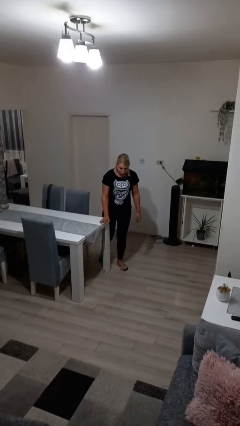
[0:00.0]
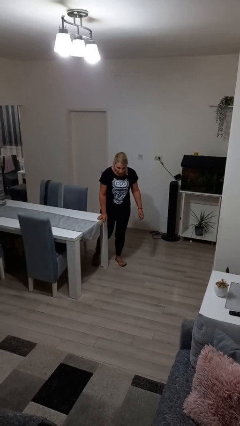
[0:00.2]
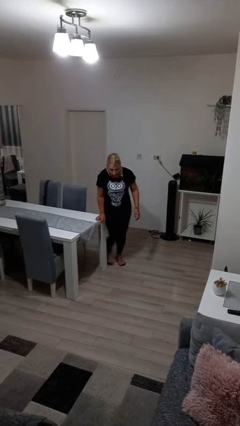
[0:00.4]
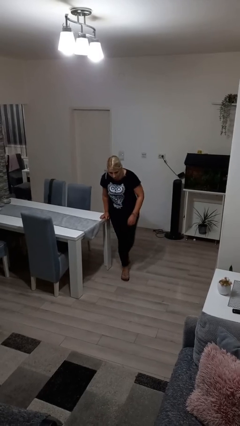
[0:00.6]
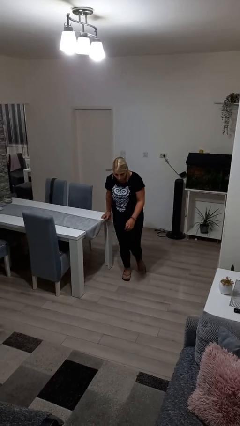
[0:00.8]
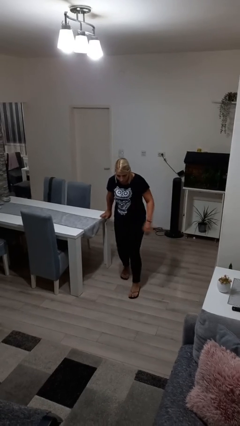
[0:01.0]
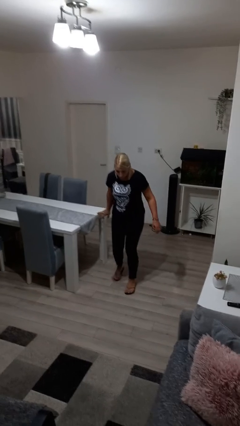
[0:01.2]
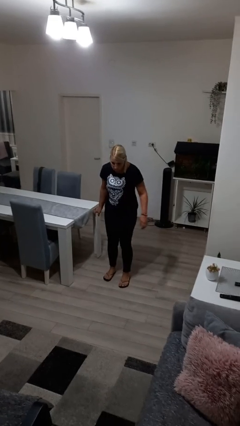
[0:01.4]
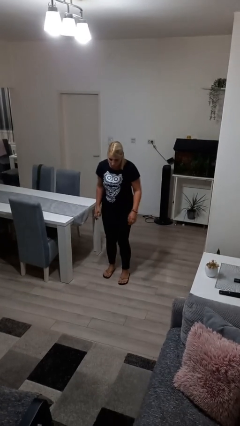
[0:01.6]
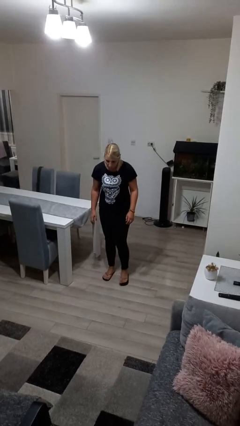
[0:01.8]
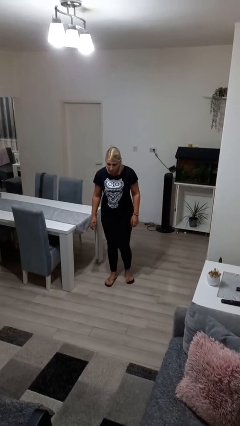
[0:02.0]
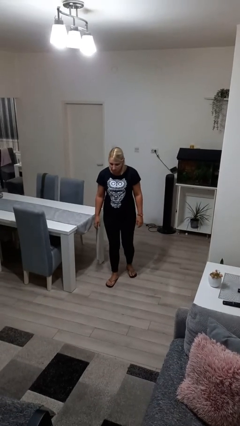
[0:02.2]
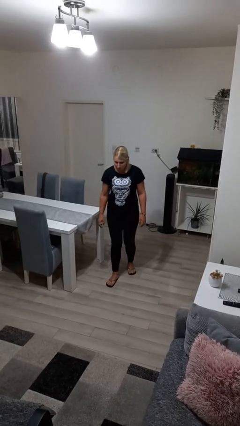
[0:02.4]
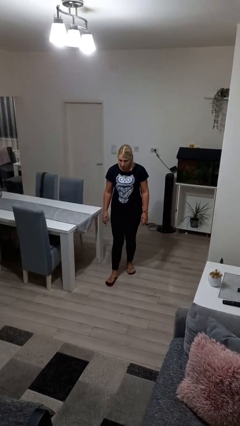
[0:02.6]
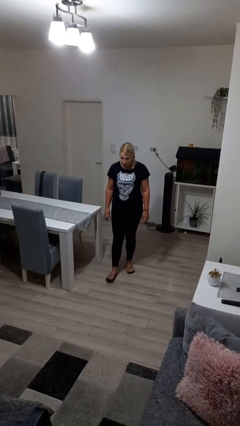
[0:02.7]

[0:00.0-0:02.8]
person bumps into table

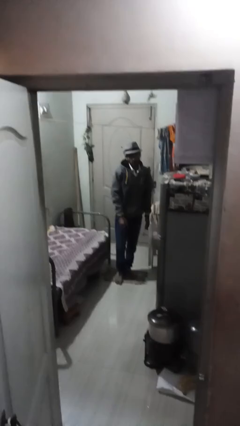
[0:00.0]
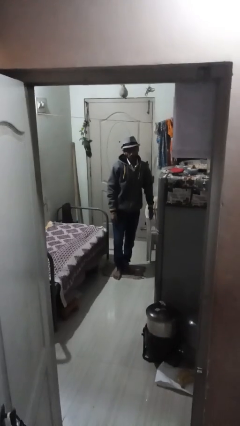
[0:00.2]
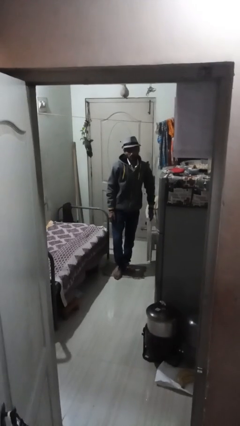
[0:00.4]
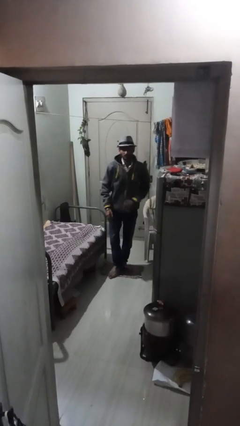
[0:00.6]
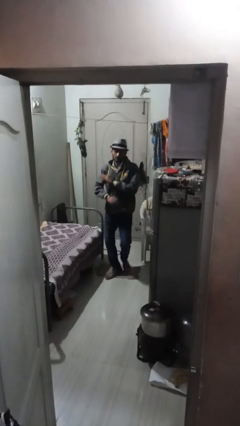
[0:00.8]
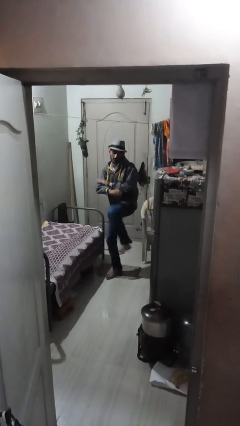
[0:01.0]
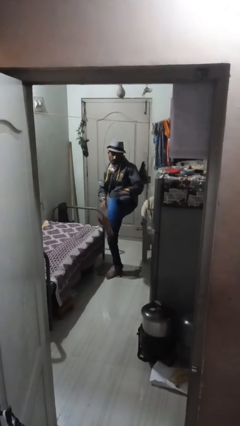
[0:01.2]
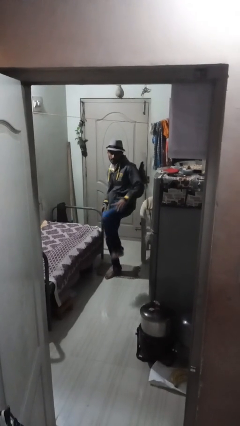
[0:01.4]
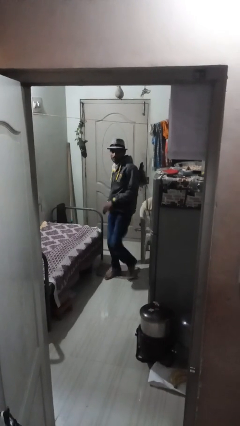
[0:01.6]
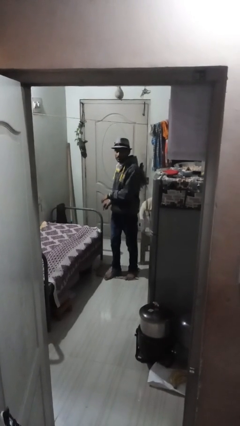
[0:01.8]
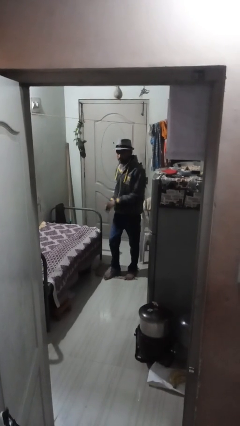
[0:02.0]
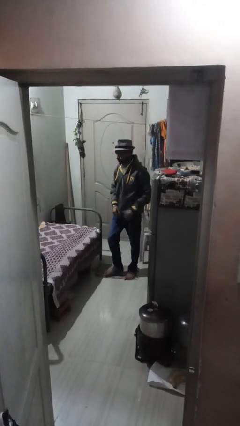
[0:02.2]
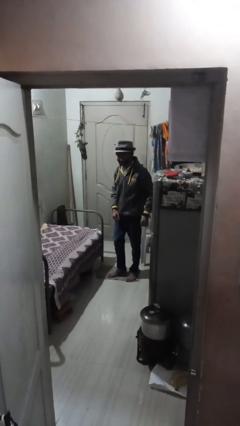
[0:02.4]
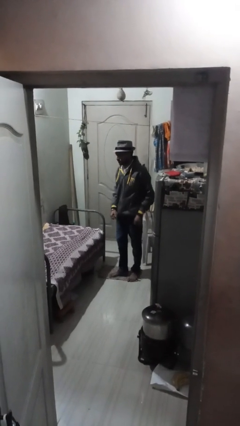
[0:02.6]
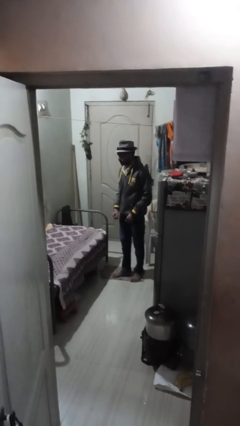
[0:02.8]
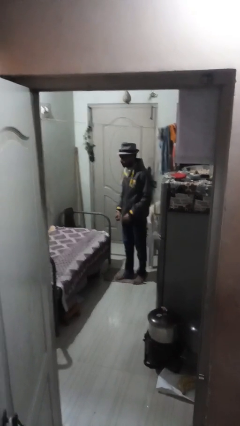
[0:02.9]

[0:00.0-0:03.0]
person karate kicks

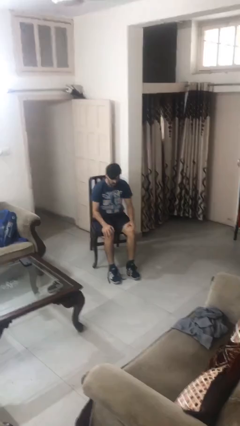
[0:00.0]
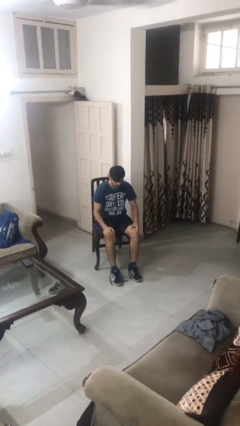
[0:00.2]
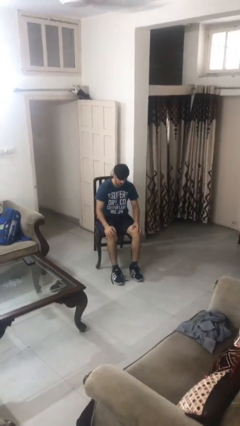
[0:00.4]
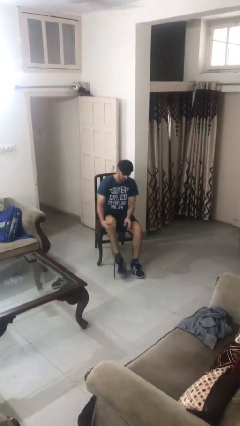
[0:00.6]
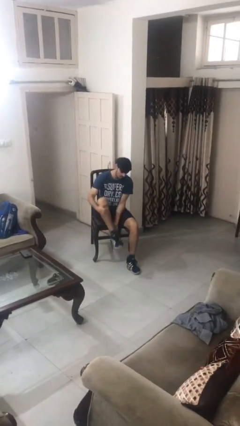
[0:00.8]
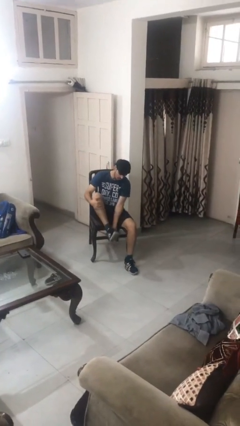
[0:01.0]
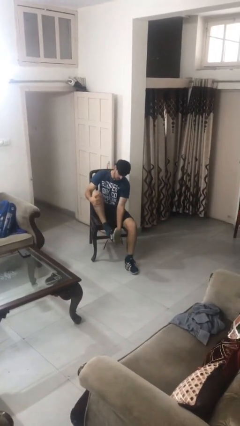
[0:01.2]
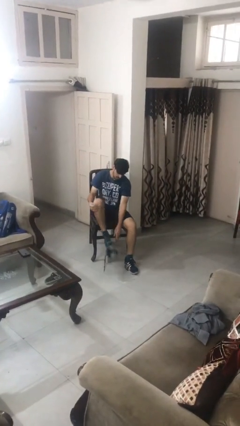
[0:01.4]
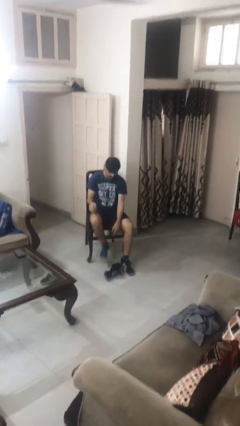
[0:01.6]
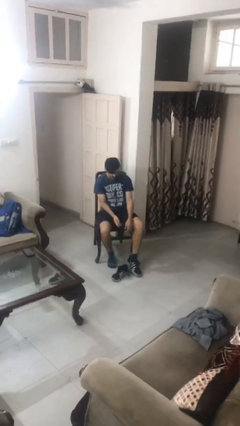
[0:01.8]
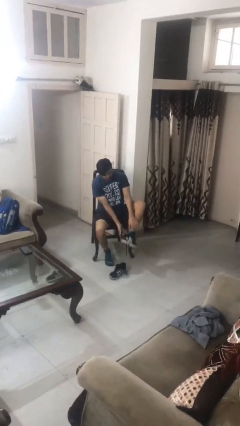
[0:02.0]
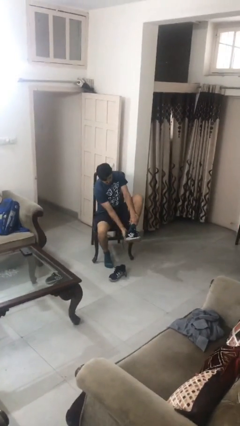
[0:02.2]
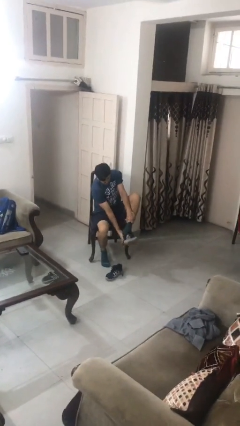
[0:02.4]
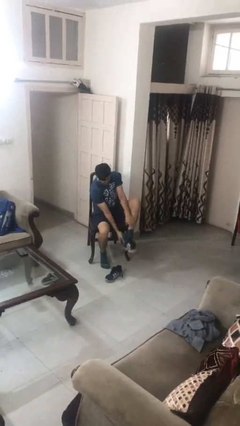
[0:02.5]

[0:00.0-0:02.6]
person takes off shoes

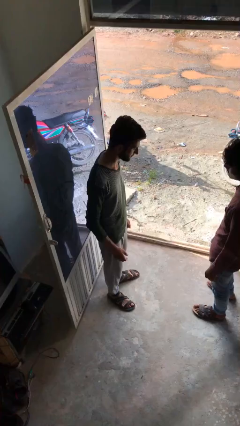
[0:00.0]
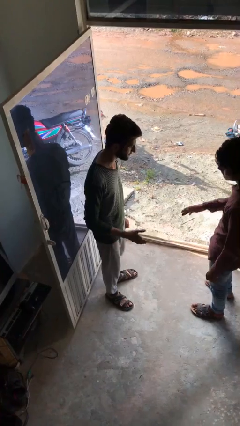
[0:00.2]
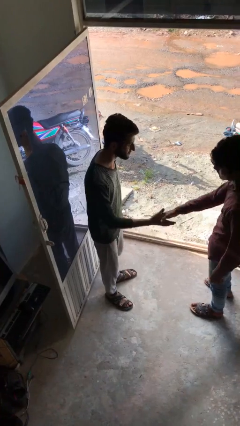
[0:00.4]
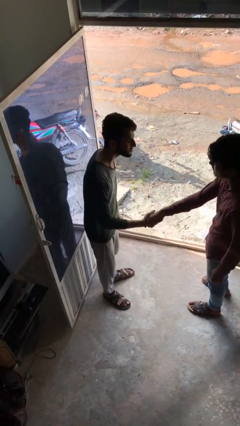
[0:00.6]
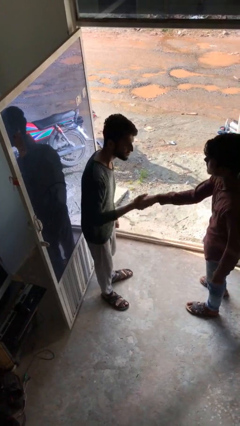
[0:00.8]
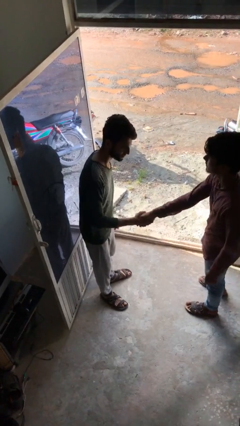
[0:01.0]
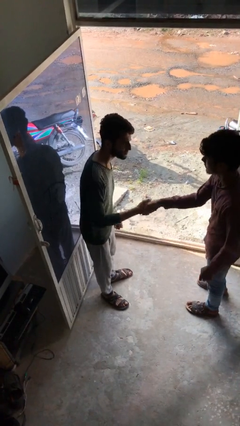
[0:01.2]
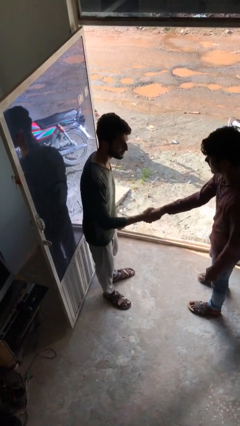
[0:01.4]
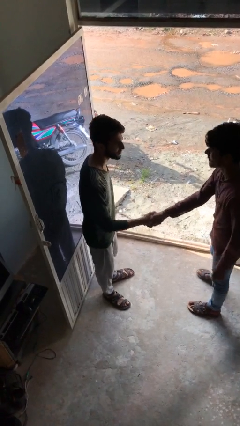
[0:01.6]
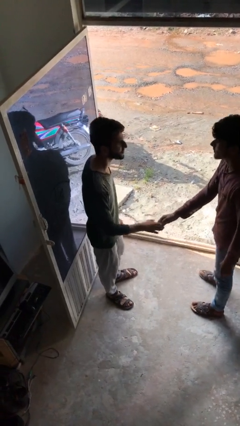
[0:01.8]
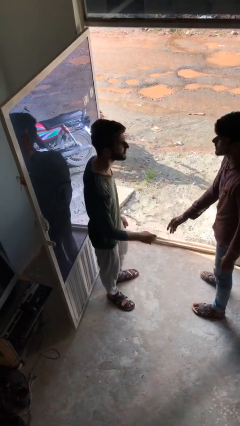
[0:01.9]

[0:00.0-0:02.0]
person shakes hand

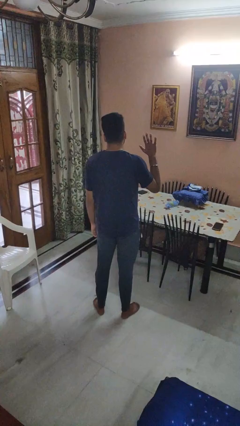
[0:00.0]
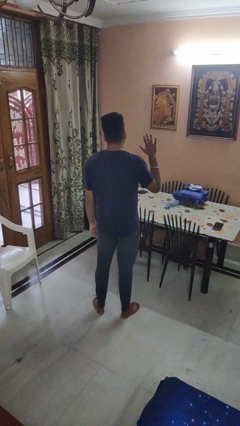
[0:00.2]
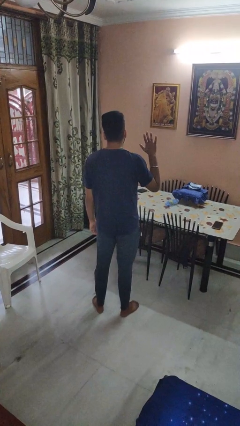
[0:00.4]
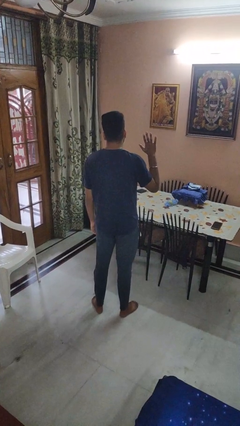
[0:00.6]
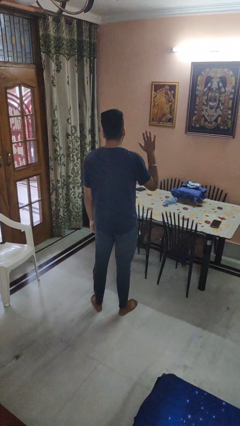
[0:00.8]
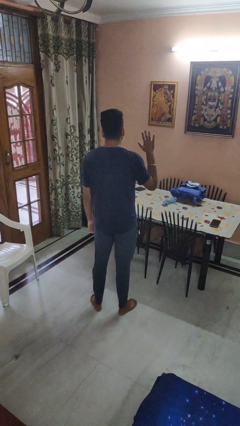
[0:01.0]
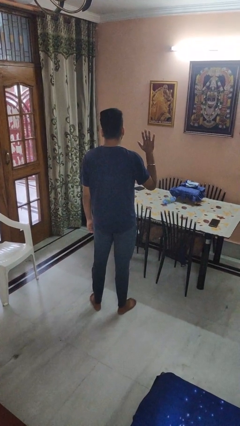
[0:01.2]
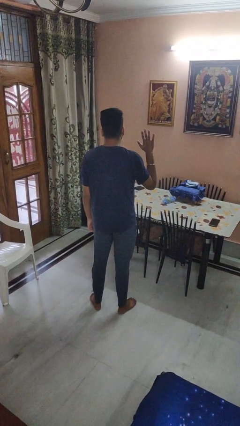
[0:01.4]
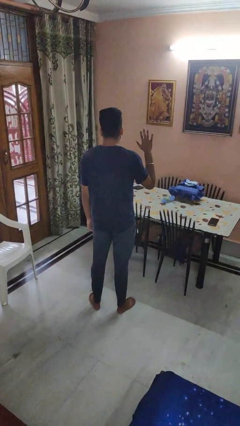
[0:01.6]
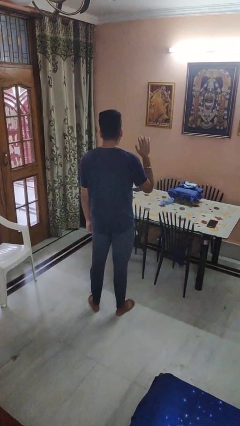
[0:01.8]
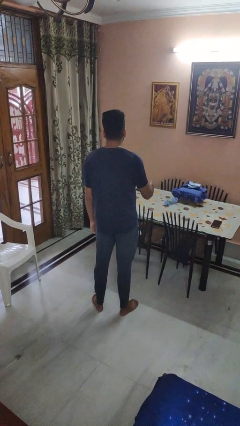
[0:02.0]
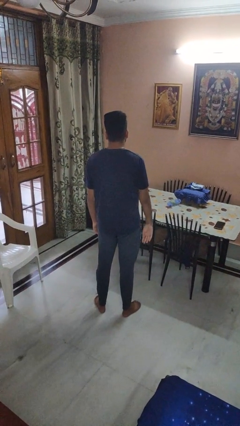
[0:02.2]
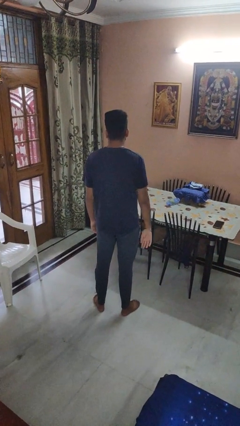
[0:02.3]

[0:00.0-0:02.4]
person gestures number five

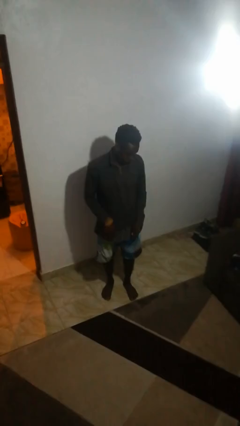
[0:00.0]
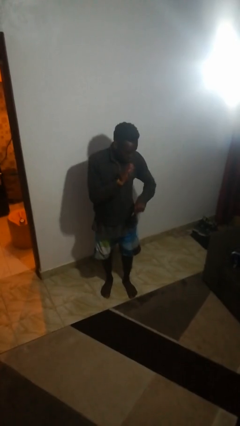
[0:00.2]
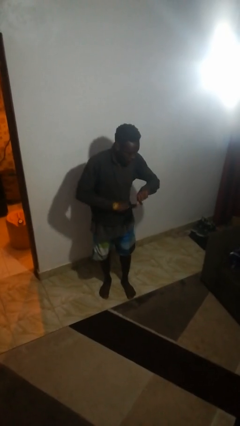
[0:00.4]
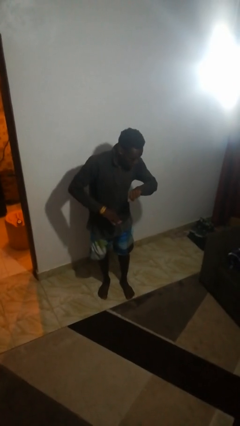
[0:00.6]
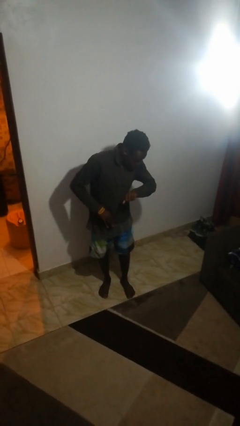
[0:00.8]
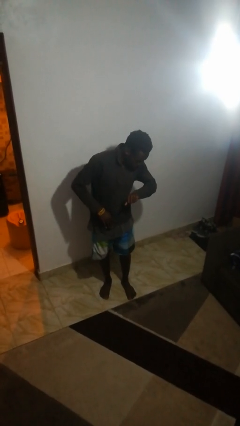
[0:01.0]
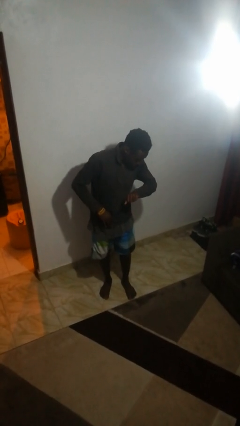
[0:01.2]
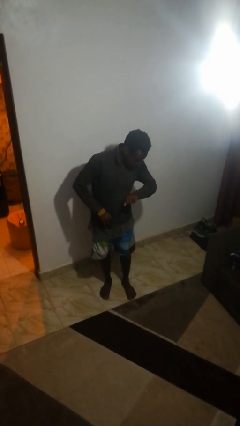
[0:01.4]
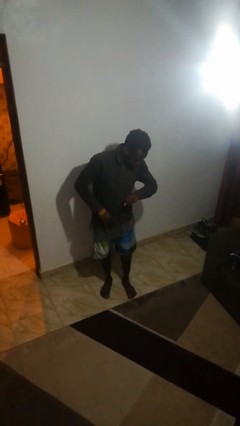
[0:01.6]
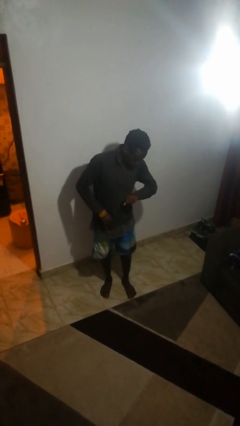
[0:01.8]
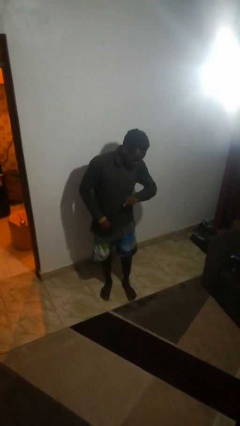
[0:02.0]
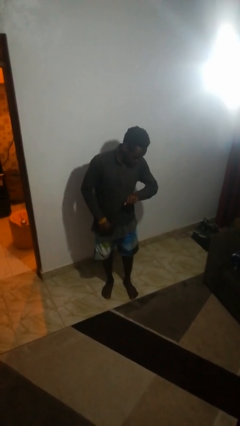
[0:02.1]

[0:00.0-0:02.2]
person swats bug

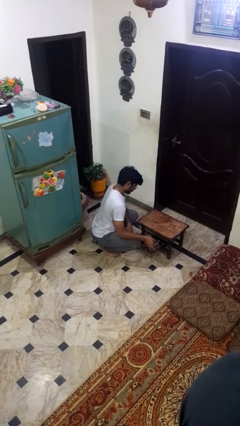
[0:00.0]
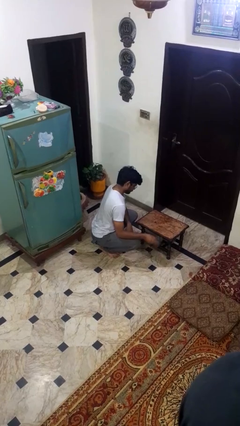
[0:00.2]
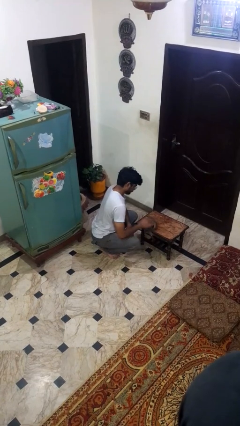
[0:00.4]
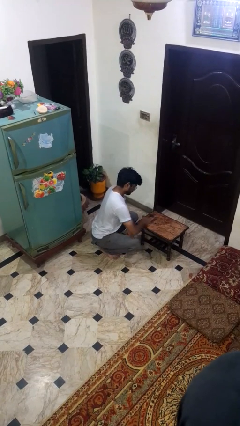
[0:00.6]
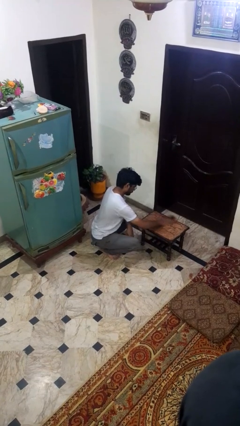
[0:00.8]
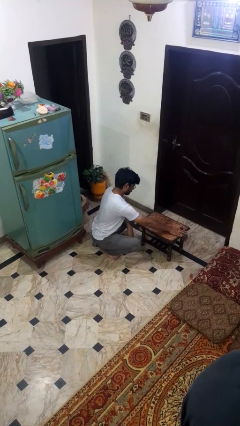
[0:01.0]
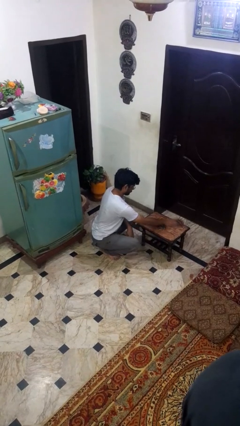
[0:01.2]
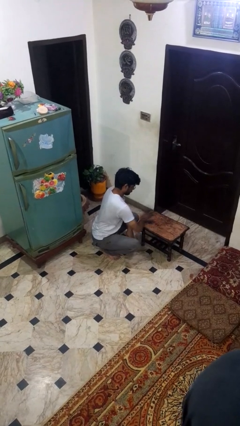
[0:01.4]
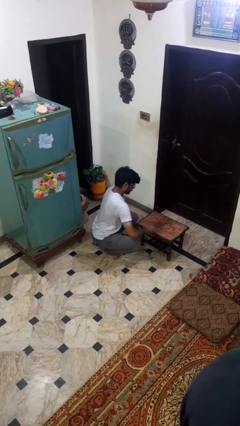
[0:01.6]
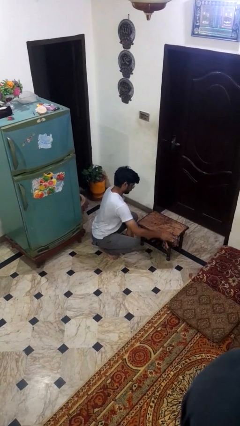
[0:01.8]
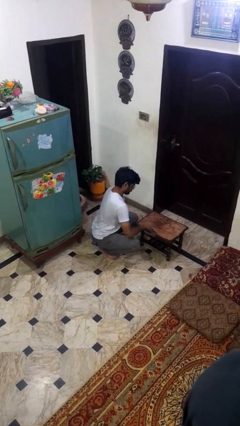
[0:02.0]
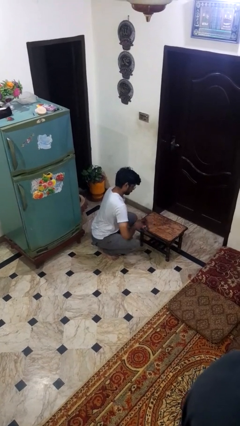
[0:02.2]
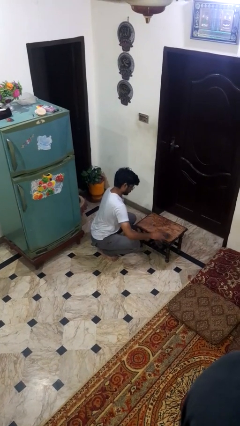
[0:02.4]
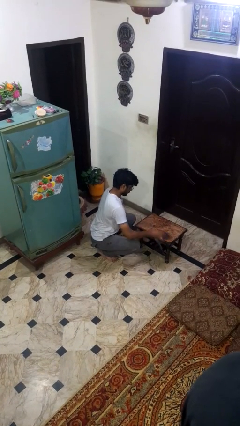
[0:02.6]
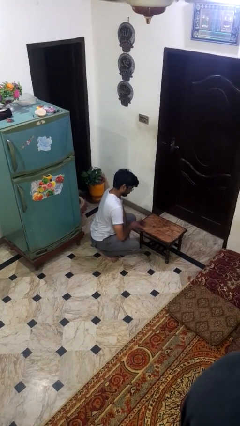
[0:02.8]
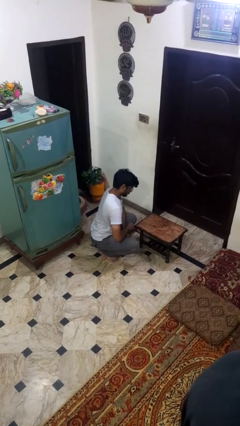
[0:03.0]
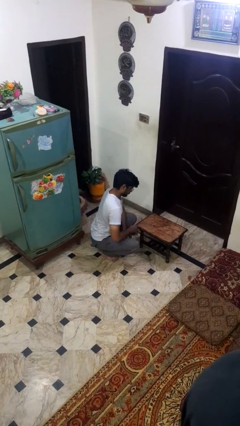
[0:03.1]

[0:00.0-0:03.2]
person cleans table with rag
